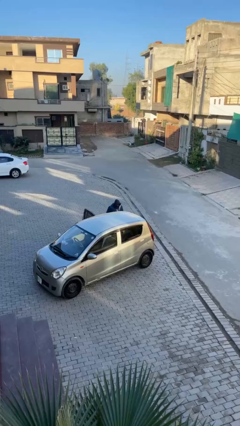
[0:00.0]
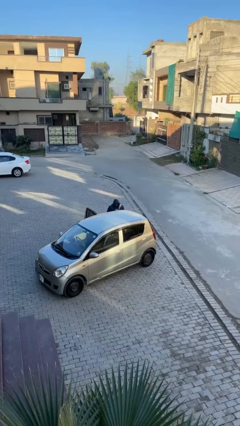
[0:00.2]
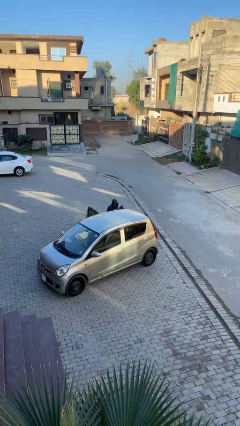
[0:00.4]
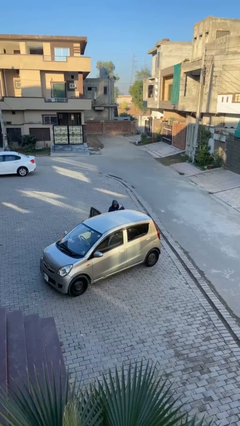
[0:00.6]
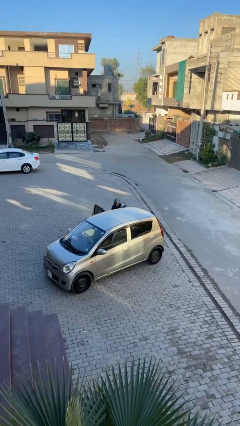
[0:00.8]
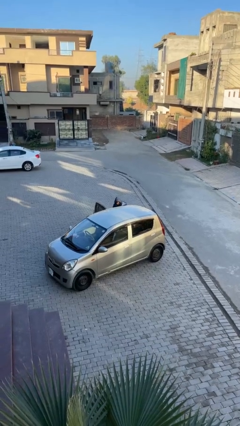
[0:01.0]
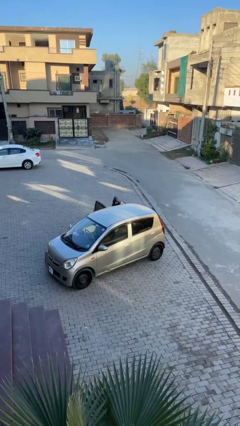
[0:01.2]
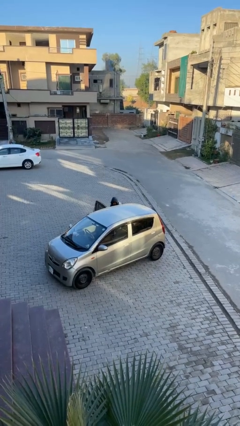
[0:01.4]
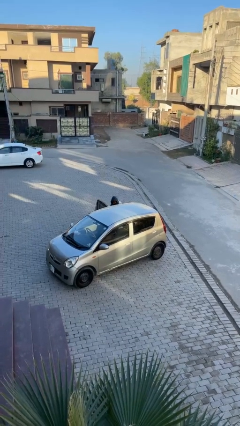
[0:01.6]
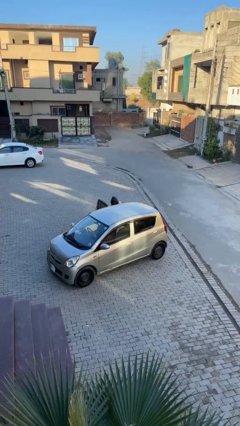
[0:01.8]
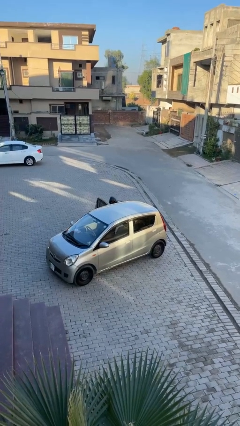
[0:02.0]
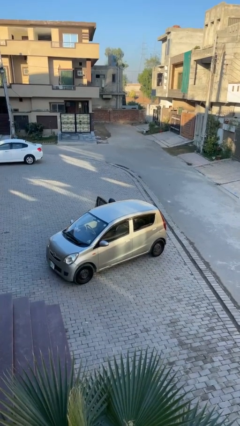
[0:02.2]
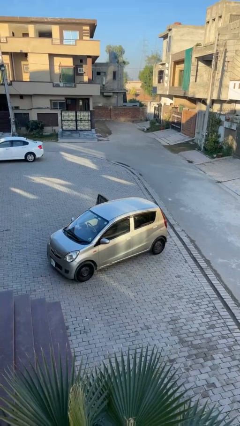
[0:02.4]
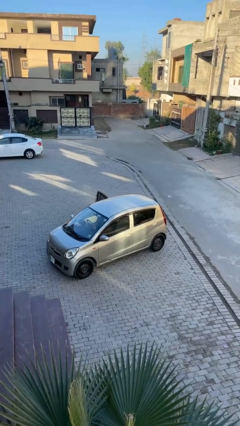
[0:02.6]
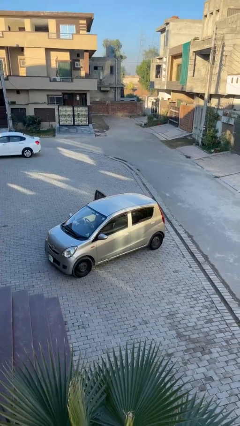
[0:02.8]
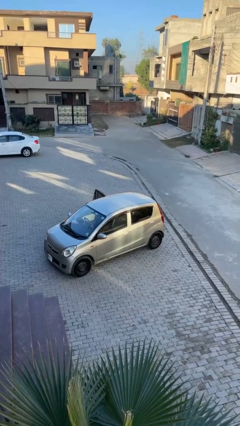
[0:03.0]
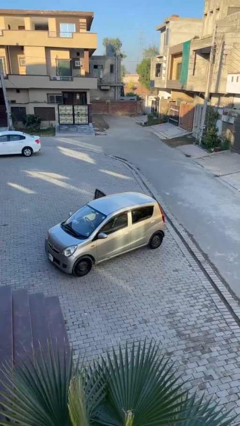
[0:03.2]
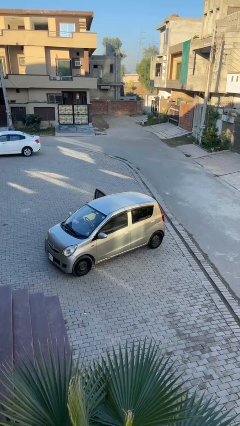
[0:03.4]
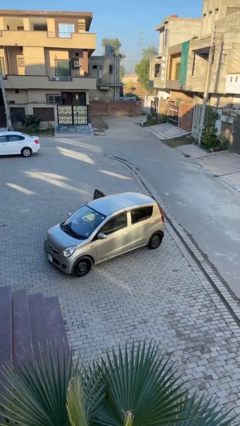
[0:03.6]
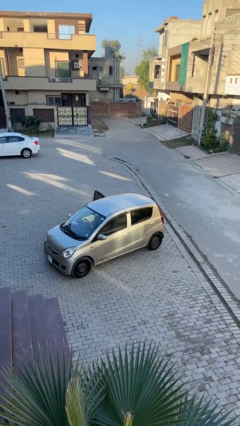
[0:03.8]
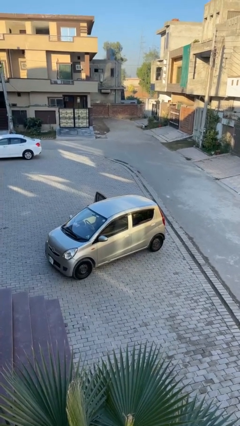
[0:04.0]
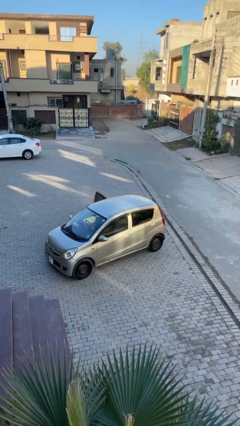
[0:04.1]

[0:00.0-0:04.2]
person enters car

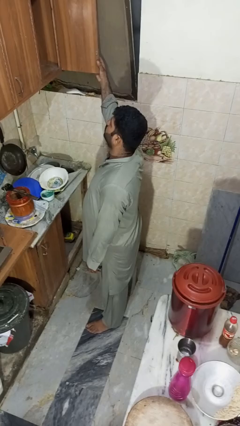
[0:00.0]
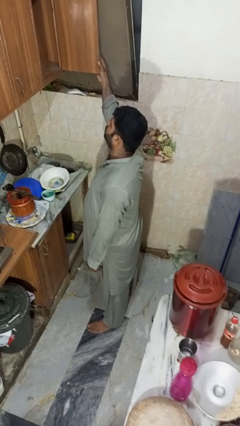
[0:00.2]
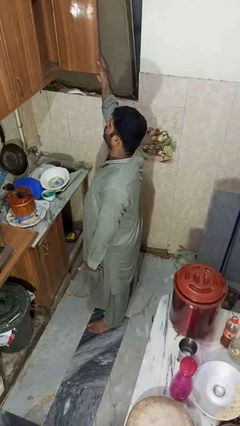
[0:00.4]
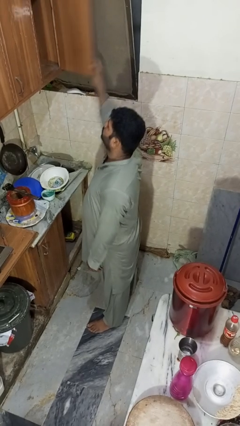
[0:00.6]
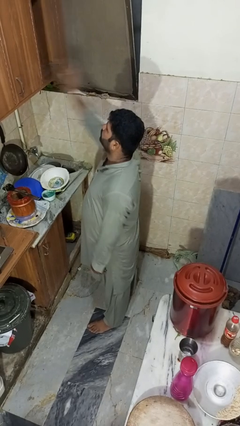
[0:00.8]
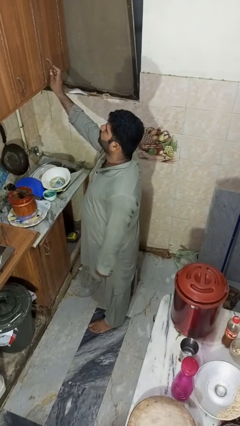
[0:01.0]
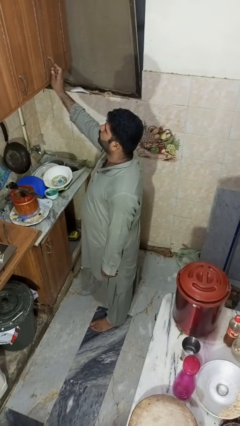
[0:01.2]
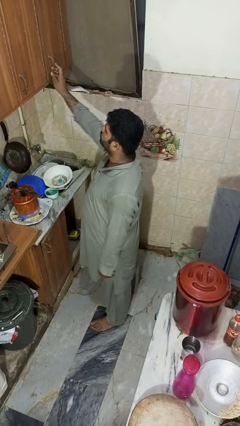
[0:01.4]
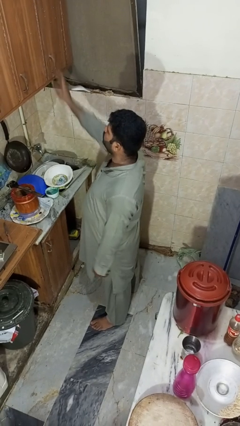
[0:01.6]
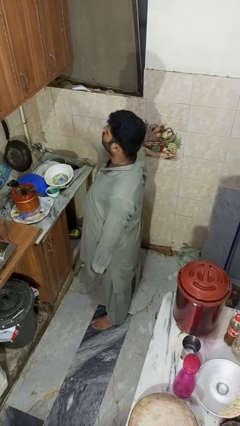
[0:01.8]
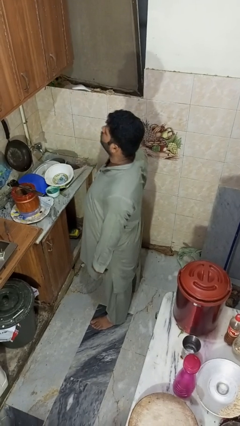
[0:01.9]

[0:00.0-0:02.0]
person closes cabinet

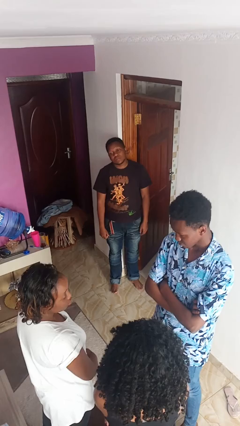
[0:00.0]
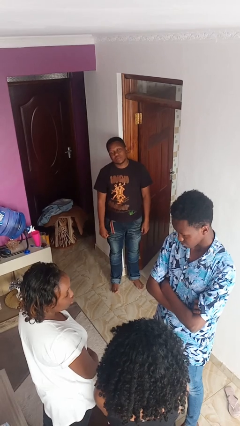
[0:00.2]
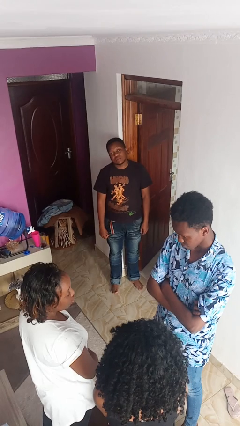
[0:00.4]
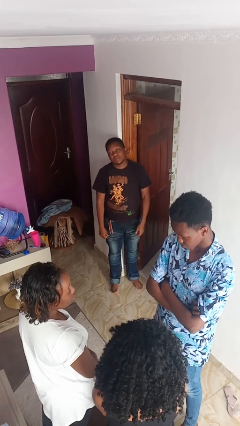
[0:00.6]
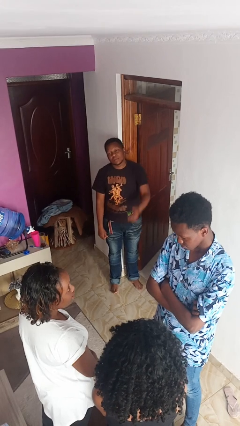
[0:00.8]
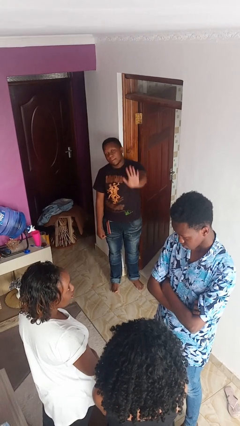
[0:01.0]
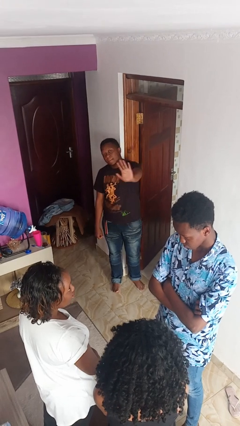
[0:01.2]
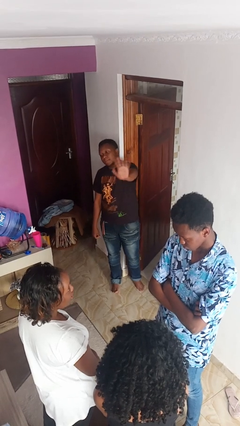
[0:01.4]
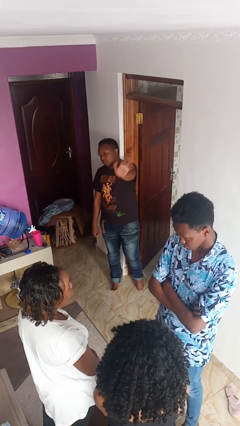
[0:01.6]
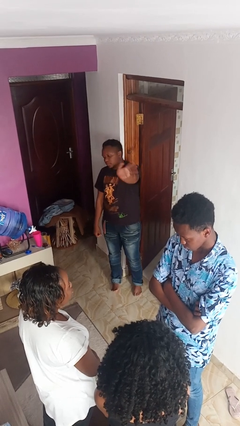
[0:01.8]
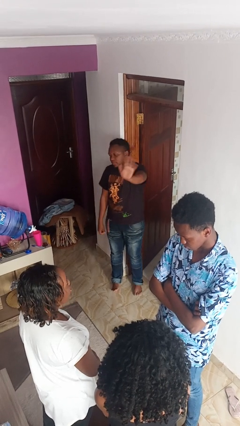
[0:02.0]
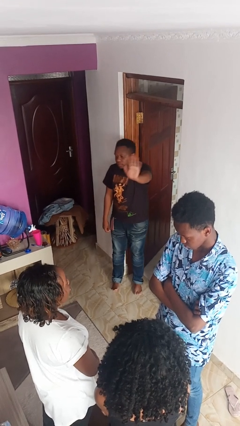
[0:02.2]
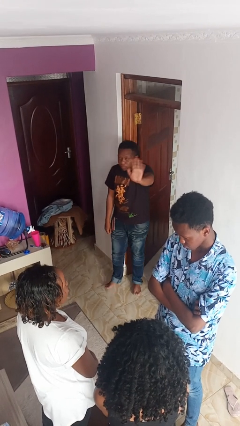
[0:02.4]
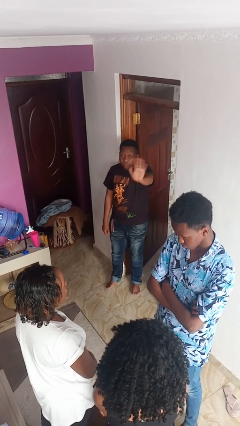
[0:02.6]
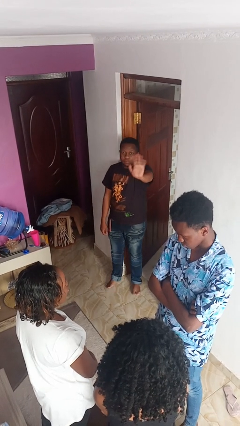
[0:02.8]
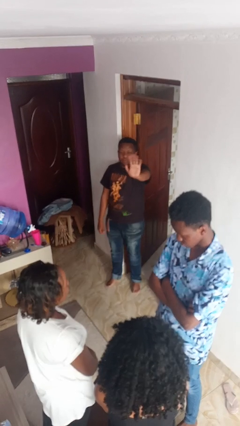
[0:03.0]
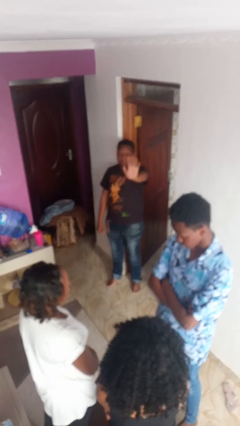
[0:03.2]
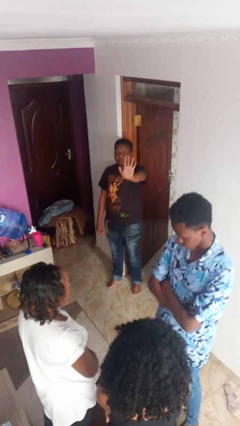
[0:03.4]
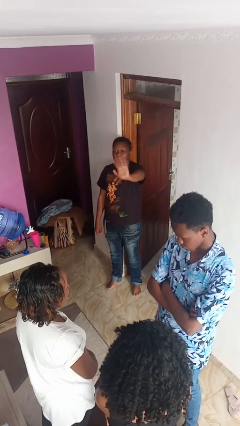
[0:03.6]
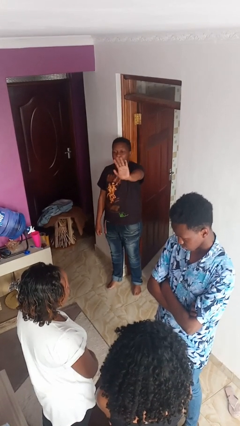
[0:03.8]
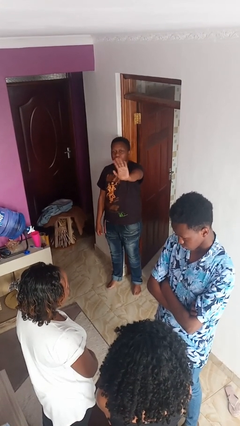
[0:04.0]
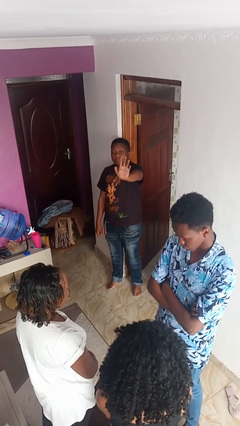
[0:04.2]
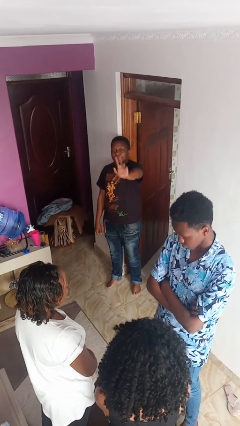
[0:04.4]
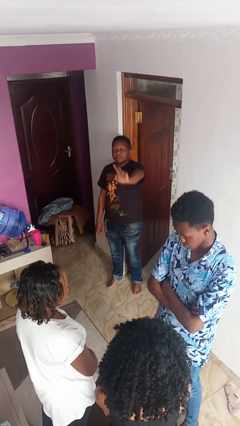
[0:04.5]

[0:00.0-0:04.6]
person waves at person

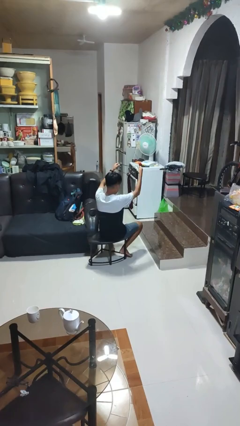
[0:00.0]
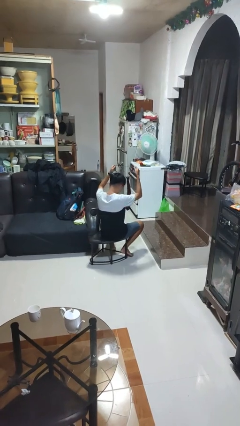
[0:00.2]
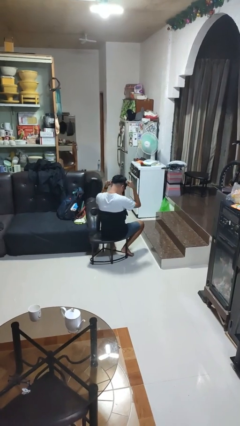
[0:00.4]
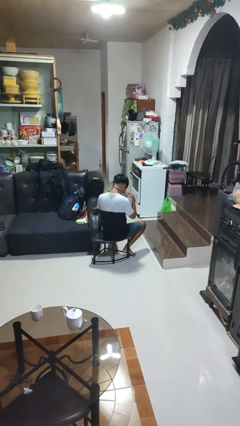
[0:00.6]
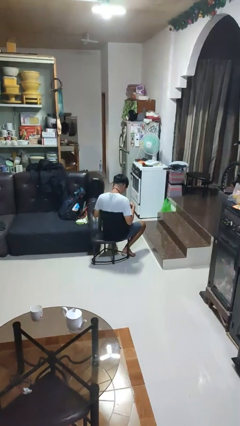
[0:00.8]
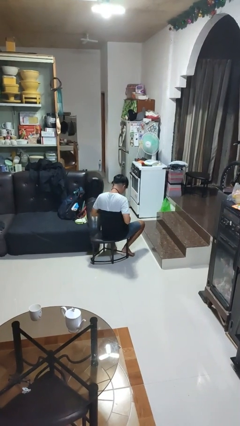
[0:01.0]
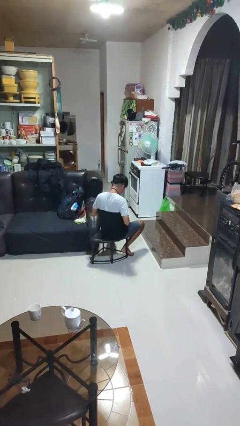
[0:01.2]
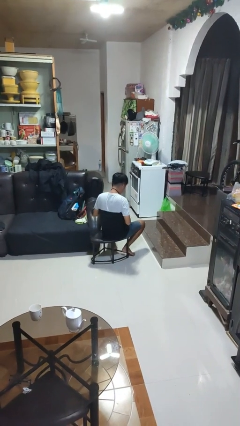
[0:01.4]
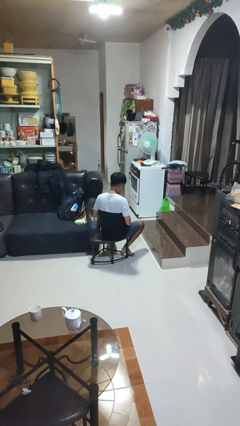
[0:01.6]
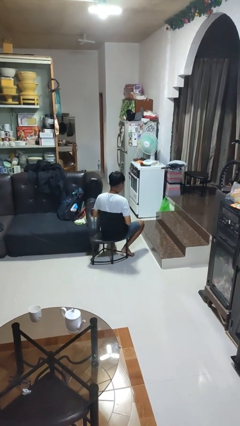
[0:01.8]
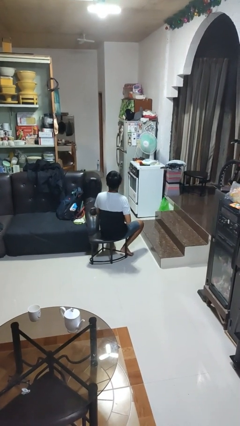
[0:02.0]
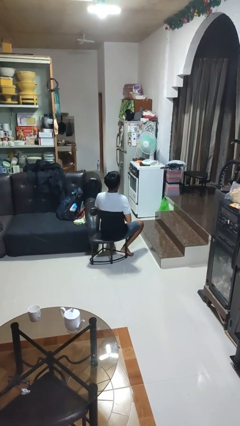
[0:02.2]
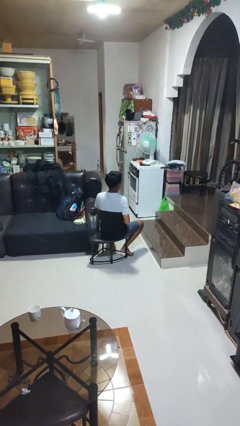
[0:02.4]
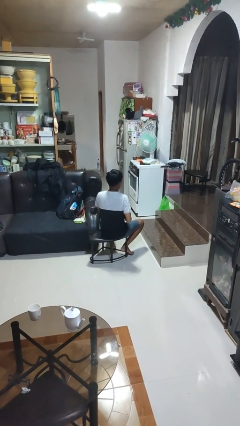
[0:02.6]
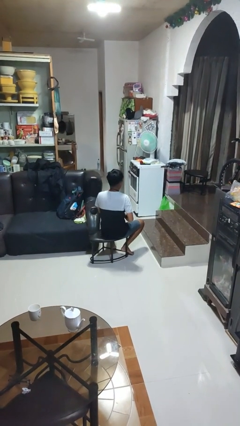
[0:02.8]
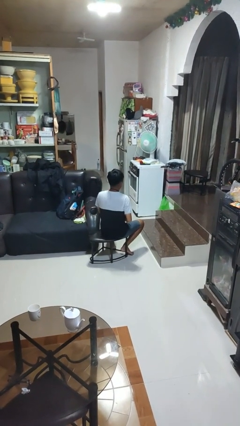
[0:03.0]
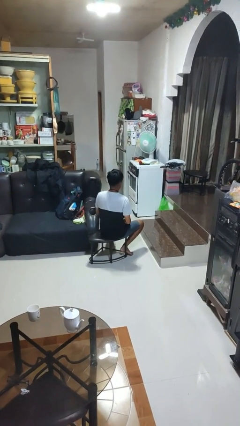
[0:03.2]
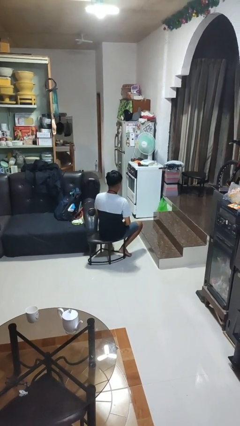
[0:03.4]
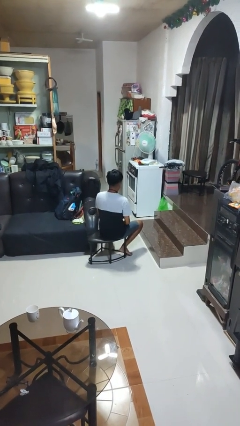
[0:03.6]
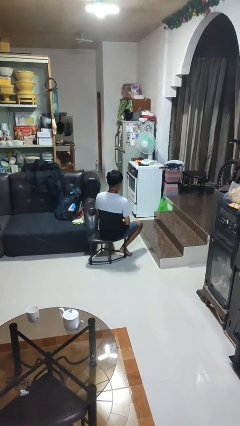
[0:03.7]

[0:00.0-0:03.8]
person puts on necktie

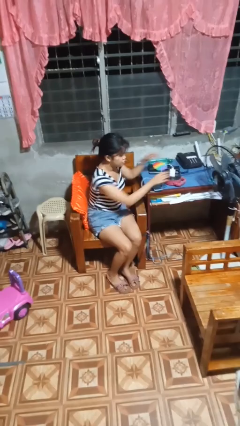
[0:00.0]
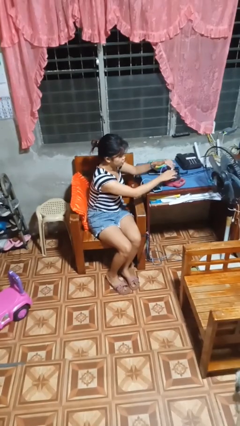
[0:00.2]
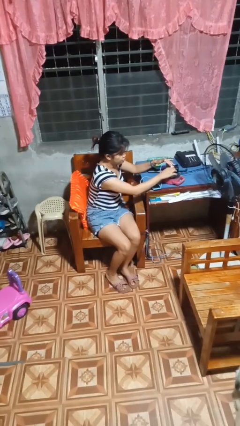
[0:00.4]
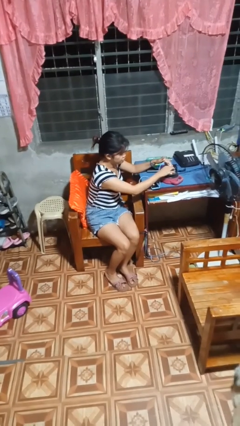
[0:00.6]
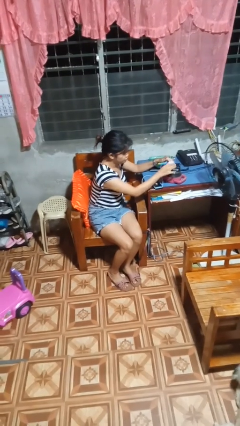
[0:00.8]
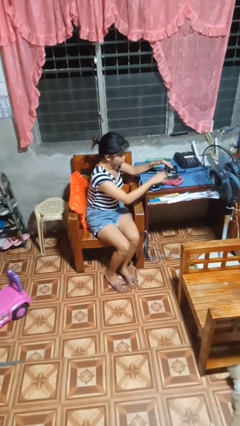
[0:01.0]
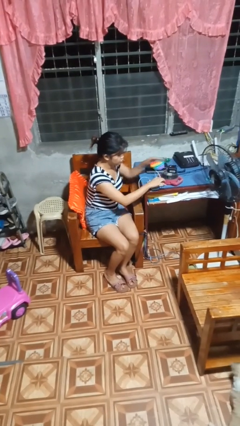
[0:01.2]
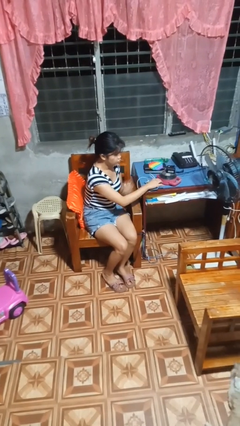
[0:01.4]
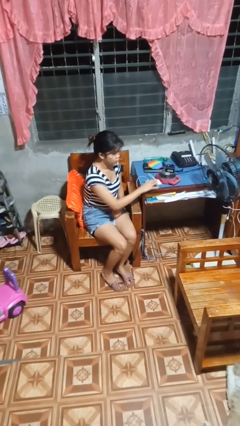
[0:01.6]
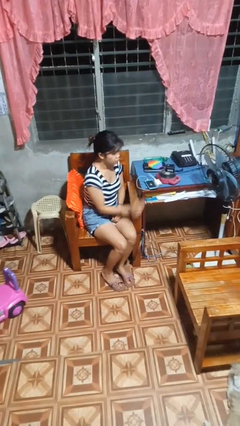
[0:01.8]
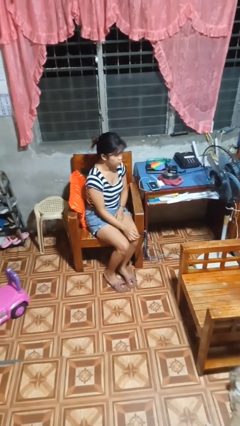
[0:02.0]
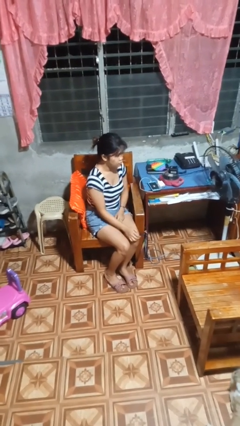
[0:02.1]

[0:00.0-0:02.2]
person unplugs from electrical socket

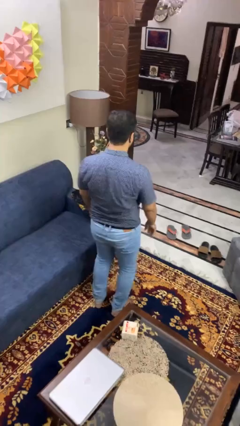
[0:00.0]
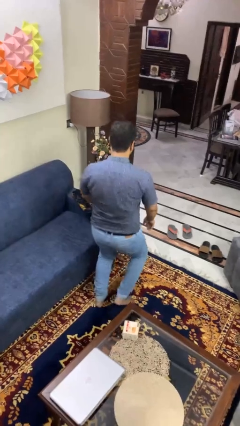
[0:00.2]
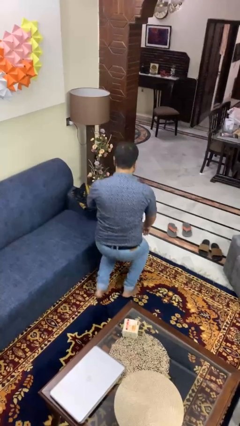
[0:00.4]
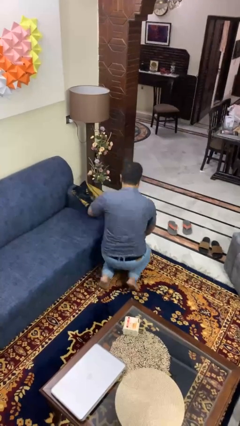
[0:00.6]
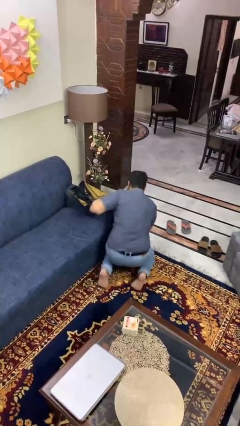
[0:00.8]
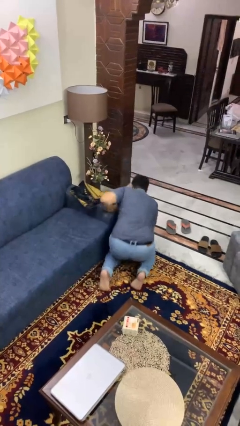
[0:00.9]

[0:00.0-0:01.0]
person trips on object on floor
